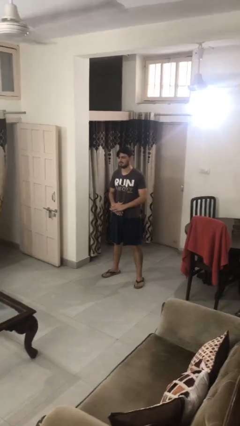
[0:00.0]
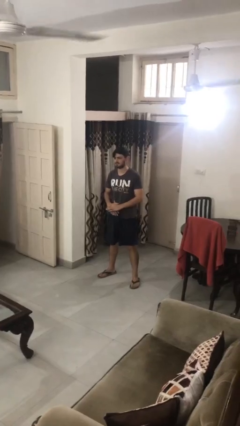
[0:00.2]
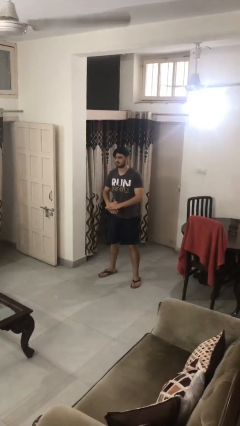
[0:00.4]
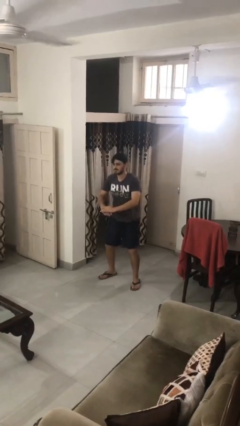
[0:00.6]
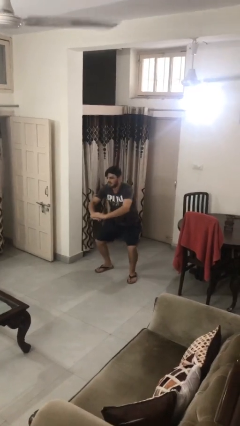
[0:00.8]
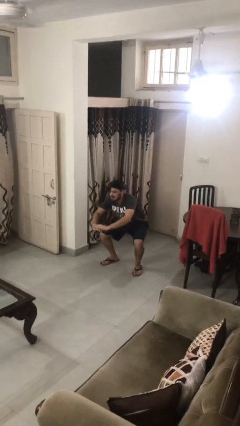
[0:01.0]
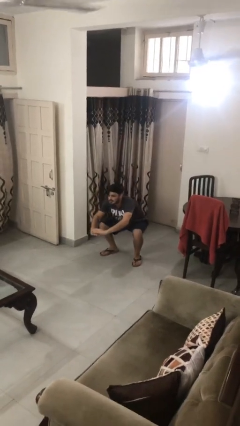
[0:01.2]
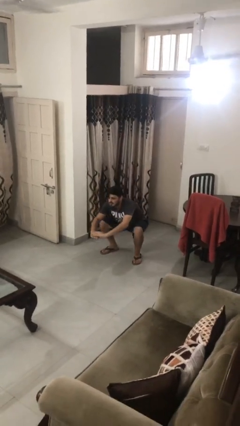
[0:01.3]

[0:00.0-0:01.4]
person squats

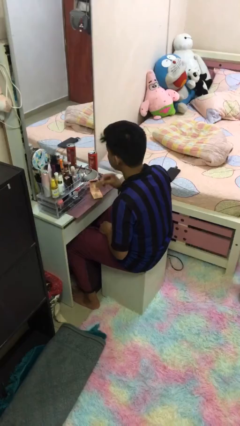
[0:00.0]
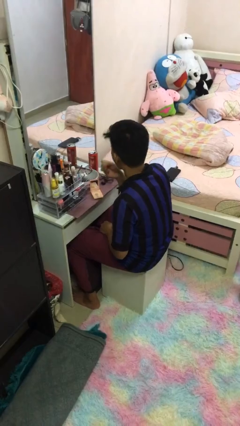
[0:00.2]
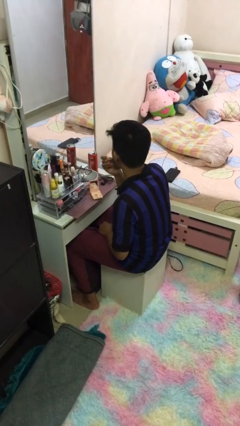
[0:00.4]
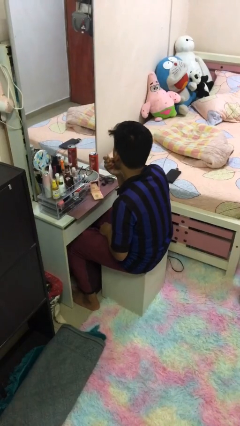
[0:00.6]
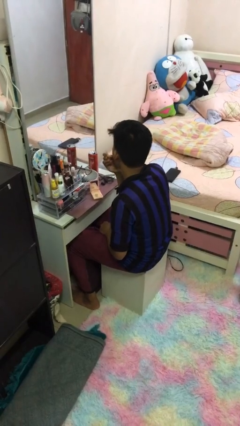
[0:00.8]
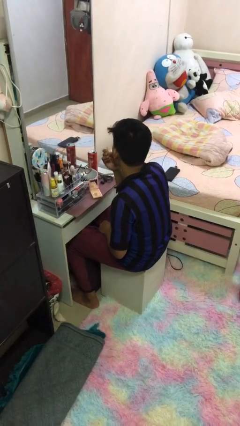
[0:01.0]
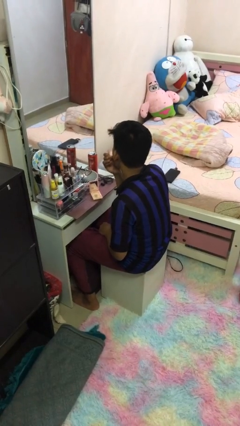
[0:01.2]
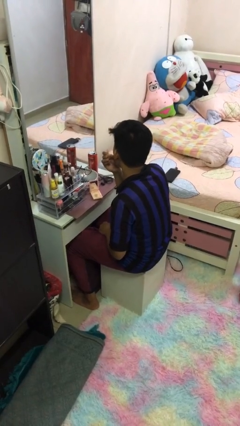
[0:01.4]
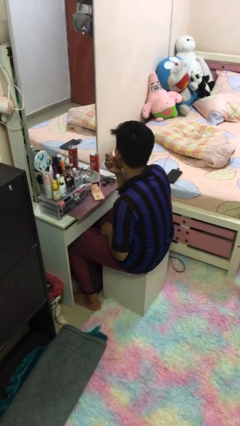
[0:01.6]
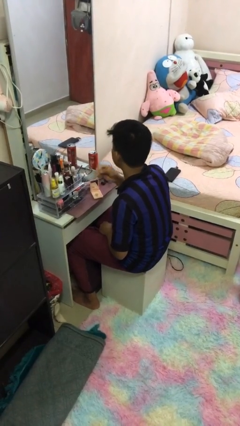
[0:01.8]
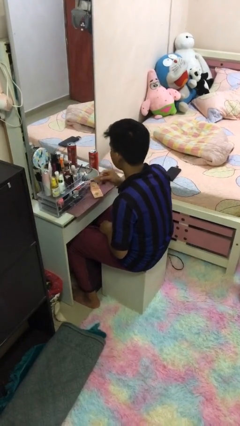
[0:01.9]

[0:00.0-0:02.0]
person applies foundation makeup

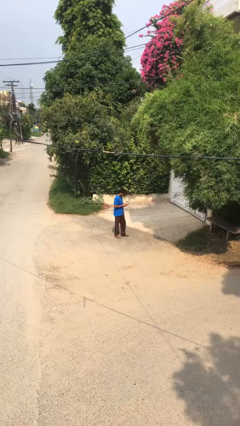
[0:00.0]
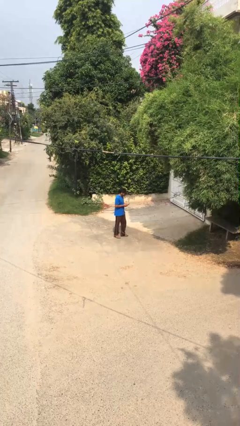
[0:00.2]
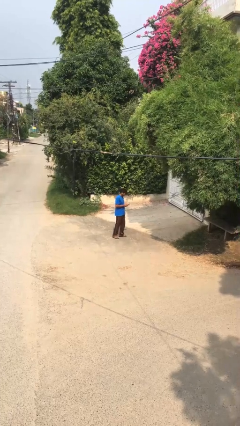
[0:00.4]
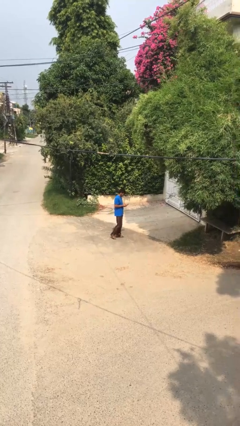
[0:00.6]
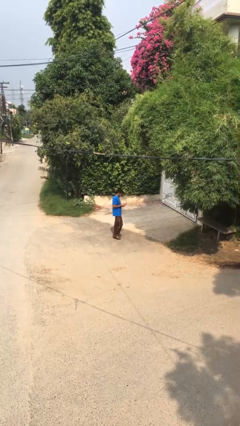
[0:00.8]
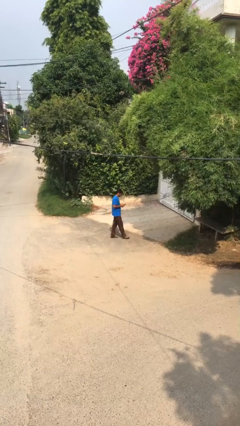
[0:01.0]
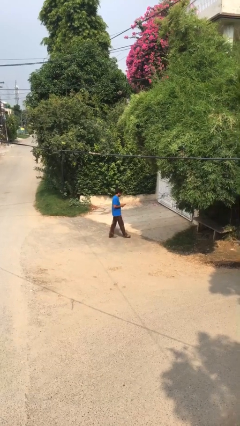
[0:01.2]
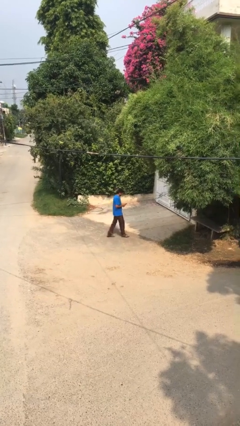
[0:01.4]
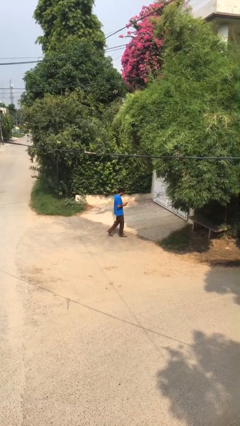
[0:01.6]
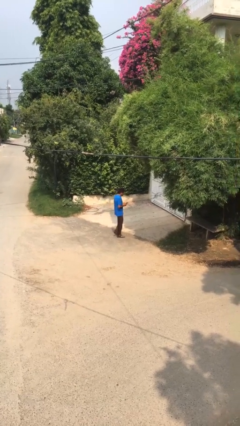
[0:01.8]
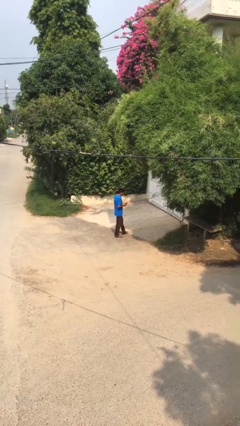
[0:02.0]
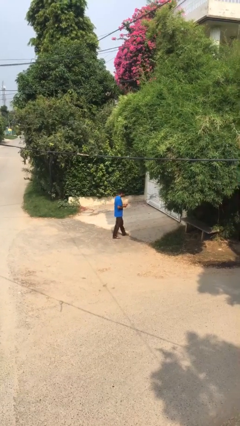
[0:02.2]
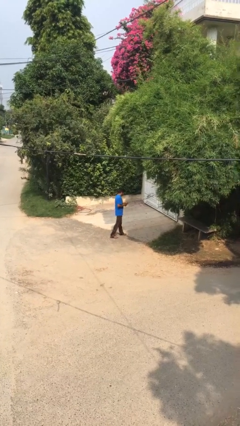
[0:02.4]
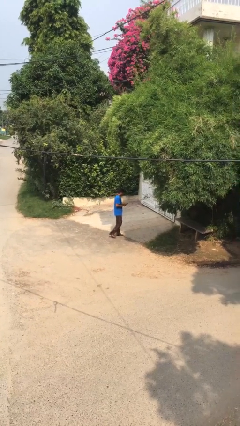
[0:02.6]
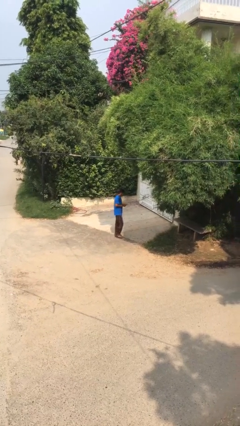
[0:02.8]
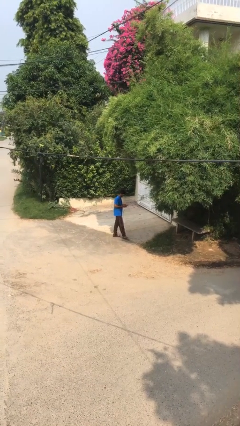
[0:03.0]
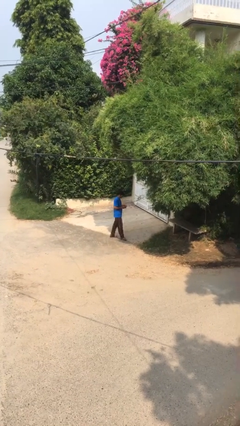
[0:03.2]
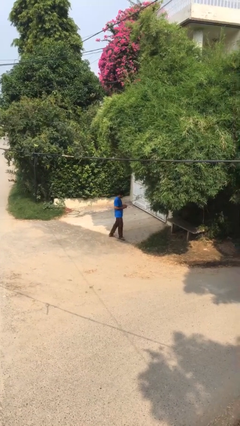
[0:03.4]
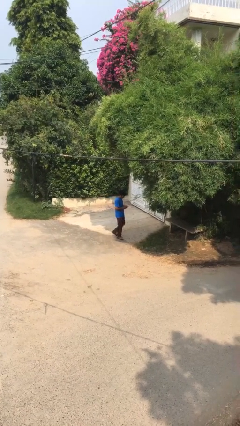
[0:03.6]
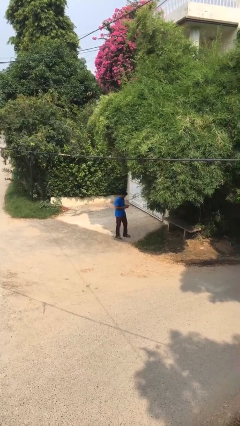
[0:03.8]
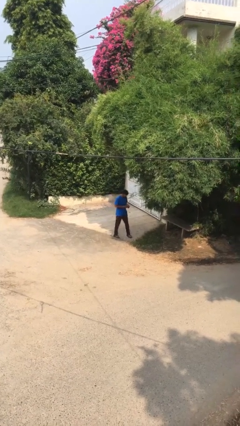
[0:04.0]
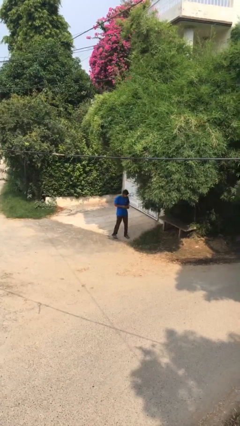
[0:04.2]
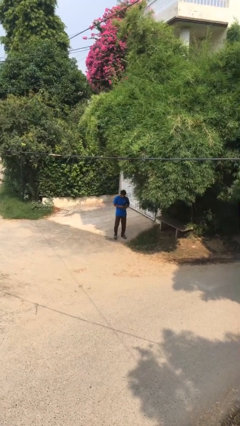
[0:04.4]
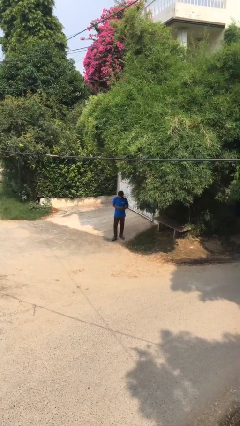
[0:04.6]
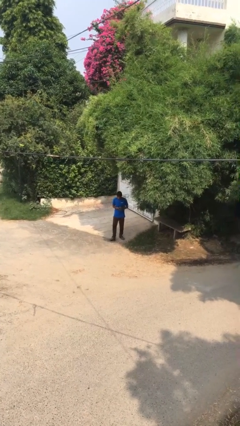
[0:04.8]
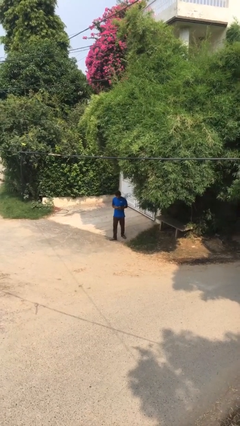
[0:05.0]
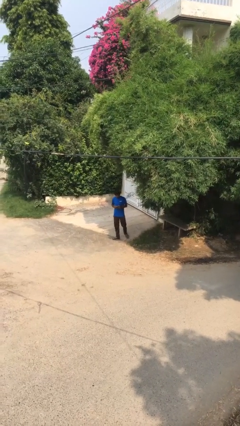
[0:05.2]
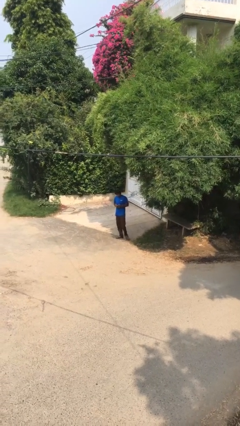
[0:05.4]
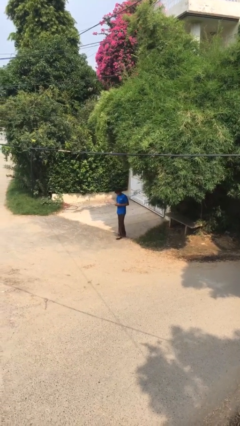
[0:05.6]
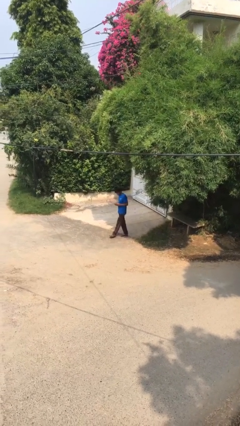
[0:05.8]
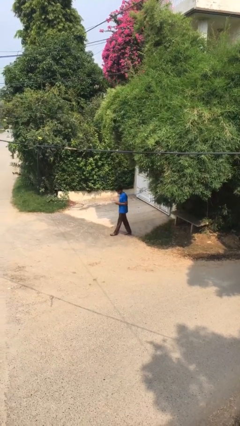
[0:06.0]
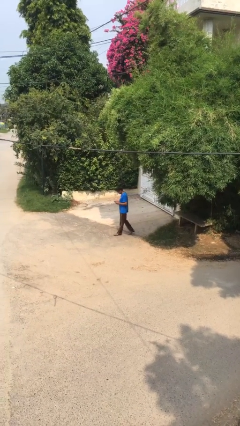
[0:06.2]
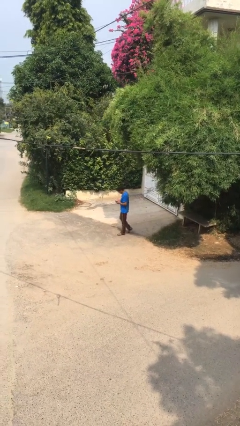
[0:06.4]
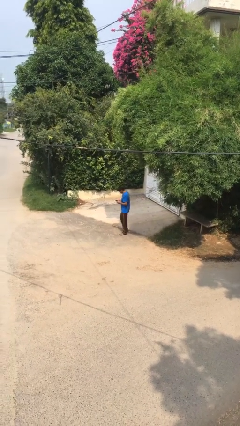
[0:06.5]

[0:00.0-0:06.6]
person texts on phone

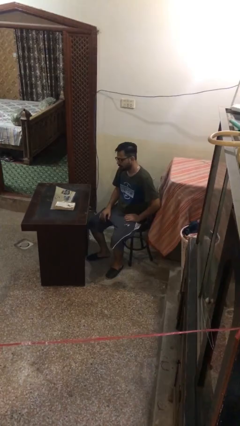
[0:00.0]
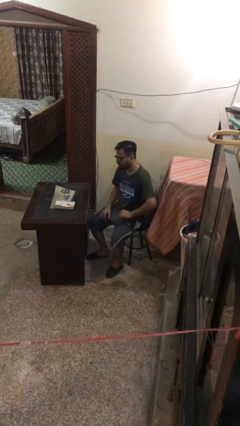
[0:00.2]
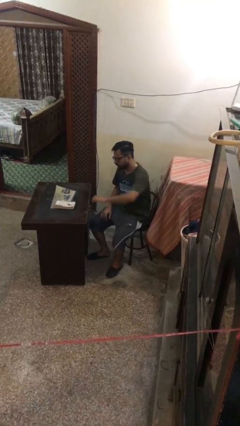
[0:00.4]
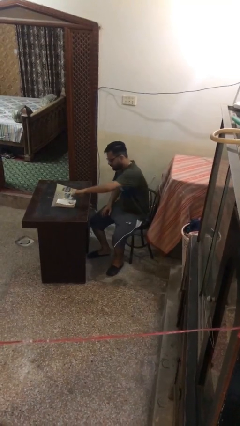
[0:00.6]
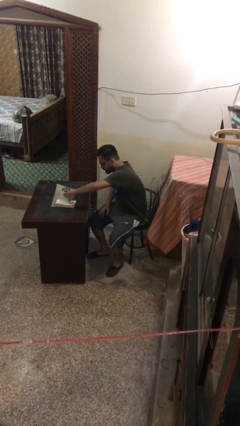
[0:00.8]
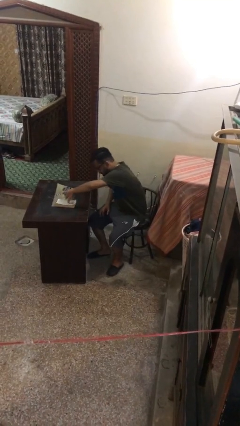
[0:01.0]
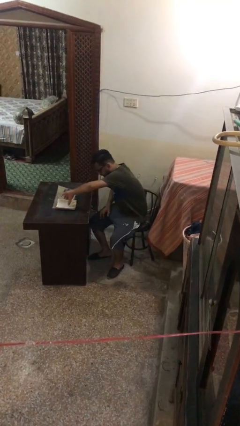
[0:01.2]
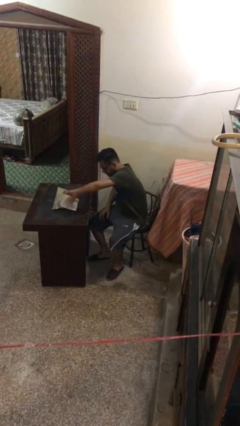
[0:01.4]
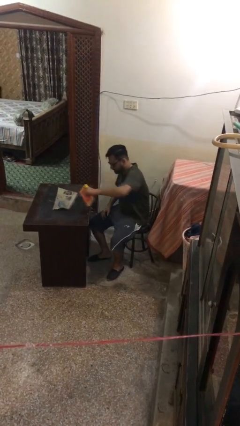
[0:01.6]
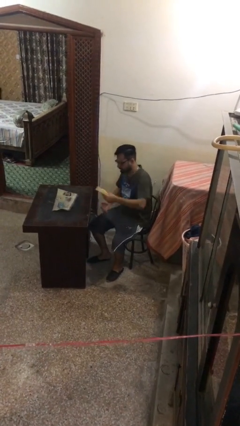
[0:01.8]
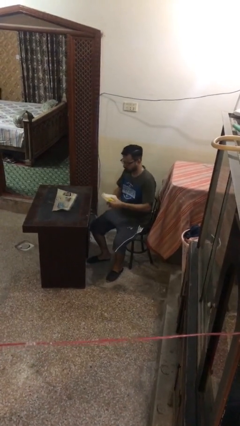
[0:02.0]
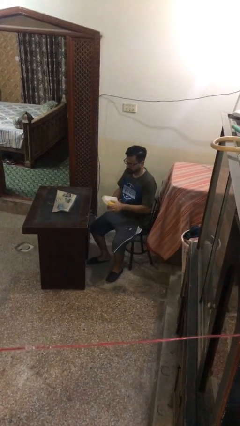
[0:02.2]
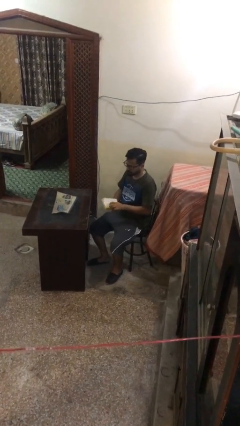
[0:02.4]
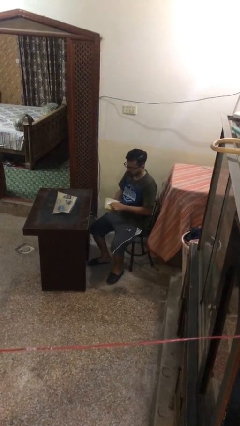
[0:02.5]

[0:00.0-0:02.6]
person picks up object from table

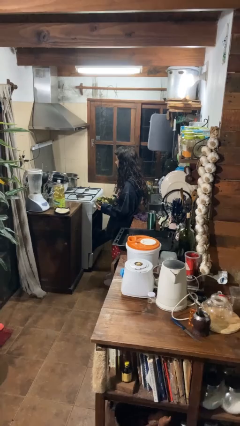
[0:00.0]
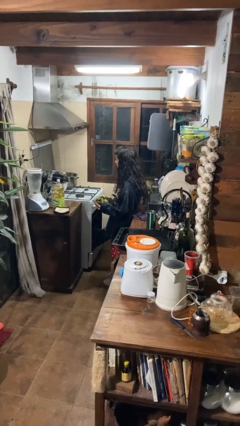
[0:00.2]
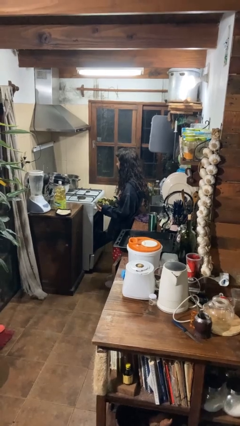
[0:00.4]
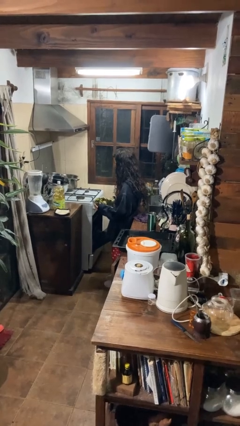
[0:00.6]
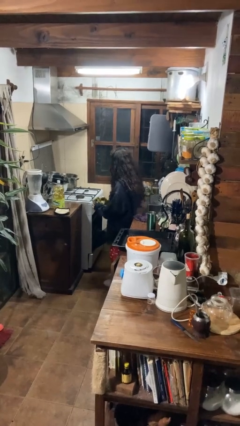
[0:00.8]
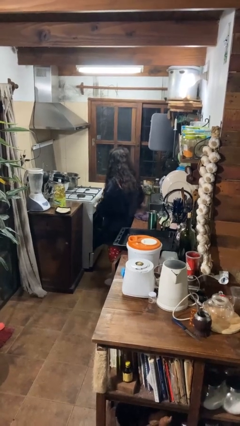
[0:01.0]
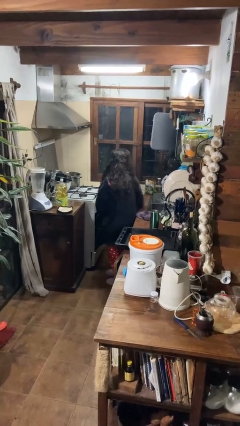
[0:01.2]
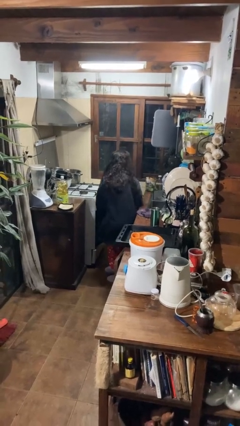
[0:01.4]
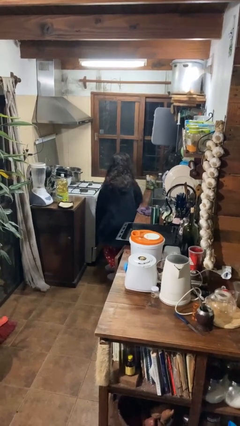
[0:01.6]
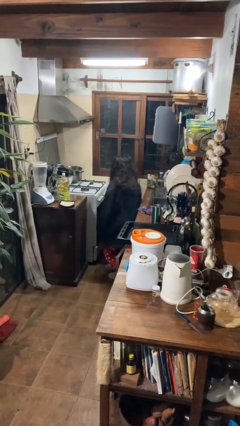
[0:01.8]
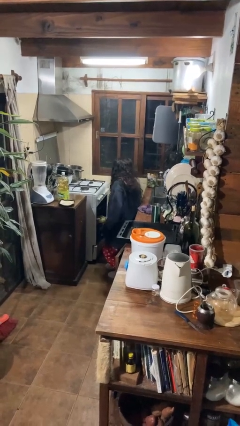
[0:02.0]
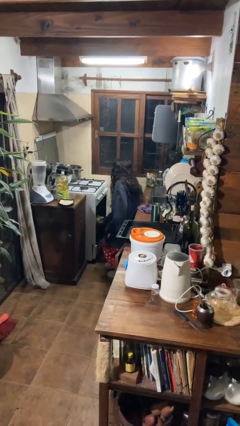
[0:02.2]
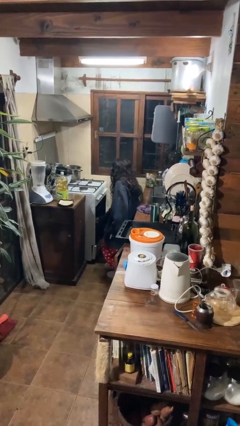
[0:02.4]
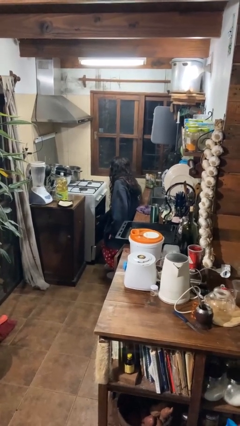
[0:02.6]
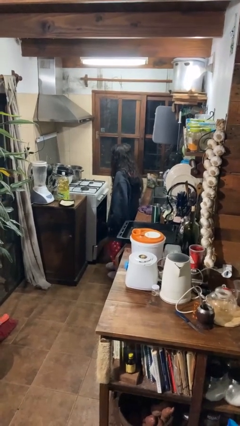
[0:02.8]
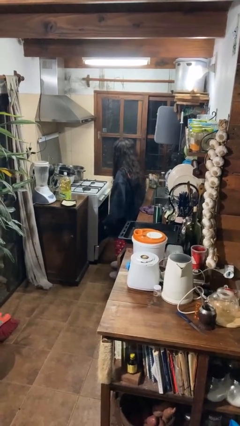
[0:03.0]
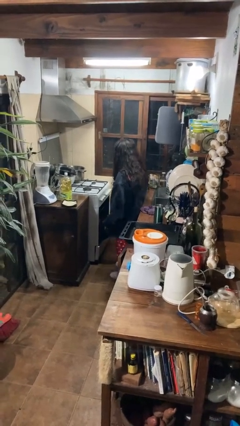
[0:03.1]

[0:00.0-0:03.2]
person puts object into oven

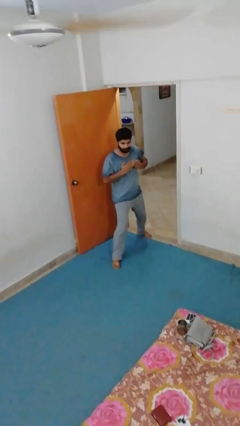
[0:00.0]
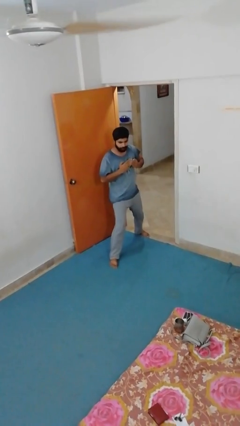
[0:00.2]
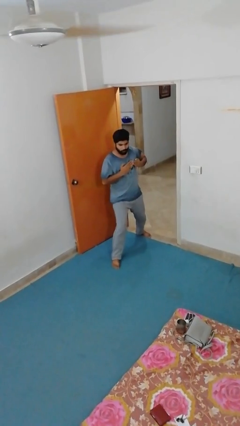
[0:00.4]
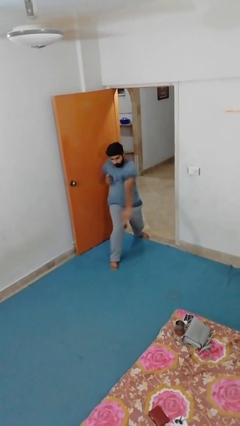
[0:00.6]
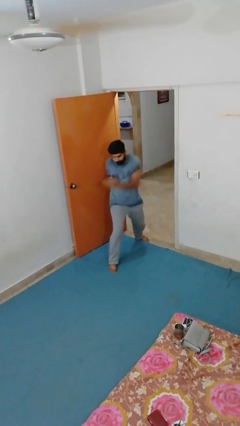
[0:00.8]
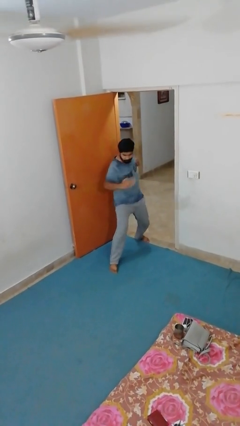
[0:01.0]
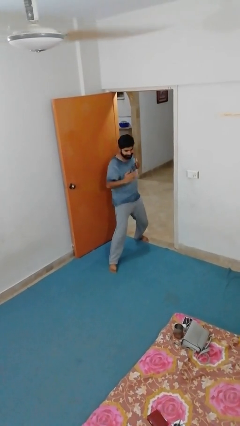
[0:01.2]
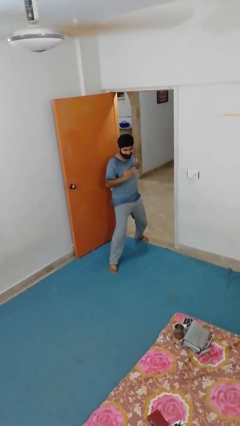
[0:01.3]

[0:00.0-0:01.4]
person karate chop
